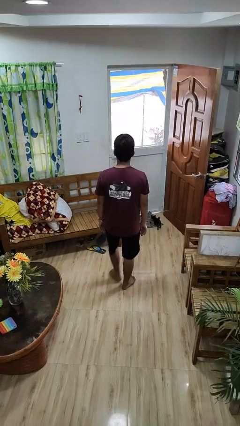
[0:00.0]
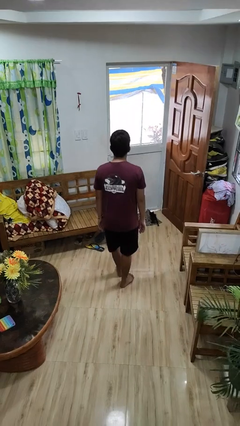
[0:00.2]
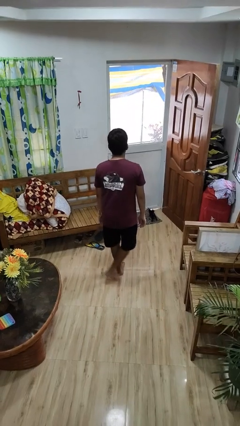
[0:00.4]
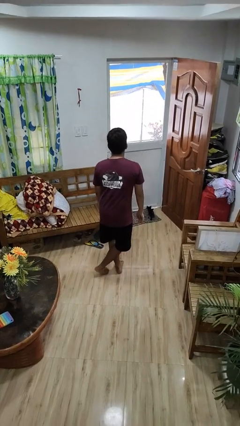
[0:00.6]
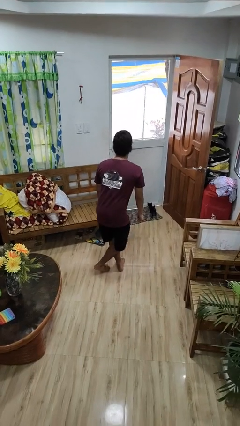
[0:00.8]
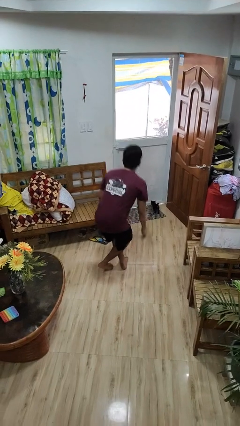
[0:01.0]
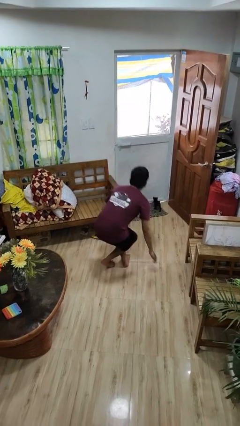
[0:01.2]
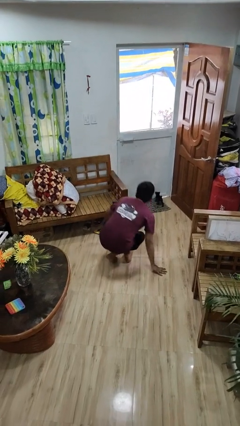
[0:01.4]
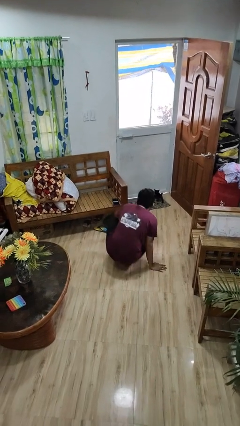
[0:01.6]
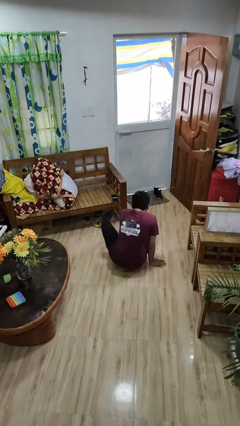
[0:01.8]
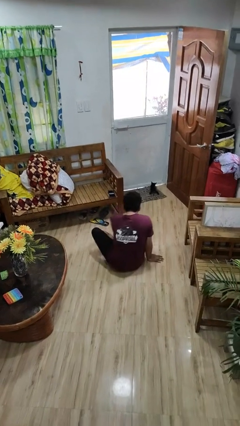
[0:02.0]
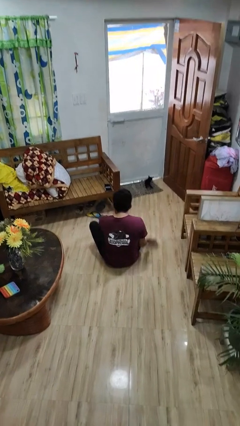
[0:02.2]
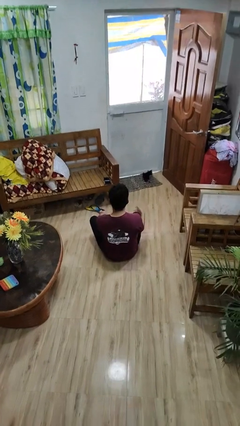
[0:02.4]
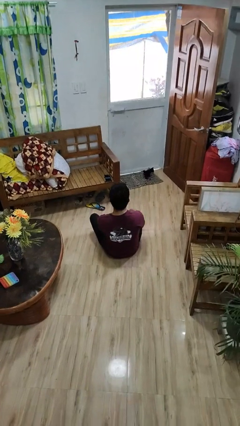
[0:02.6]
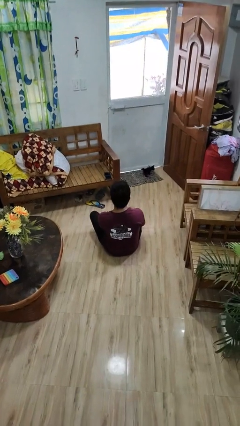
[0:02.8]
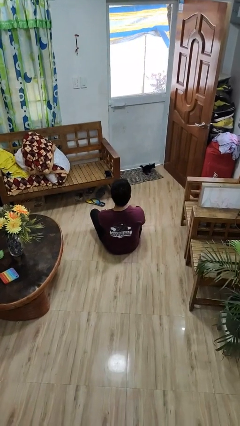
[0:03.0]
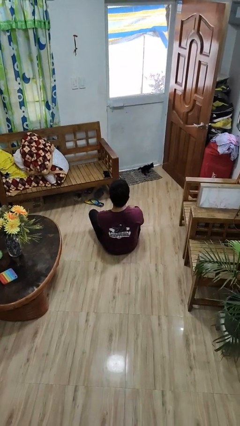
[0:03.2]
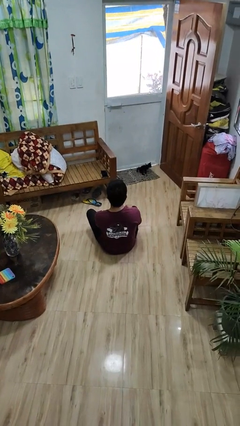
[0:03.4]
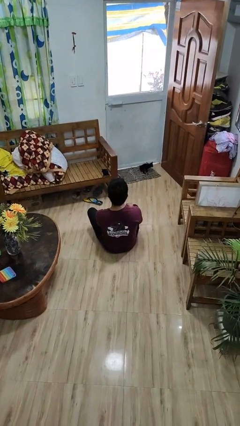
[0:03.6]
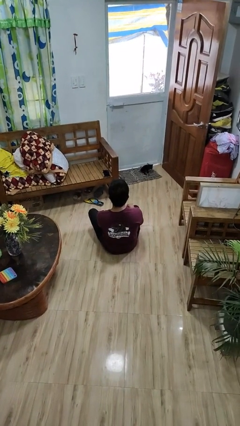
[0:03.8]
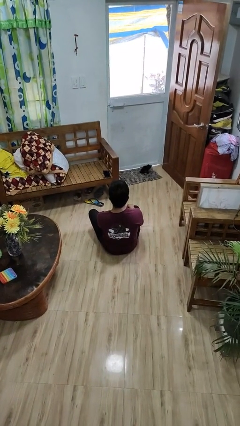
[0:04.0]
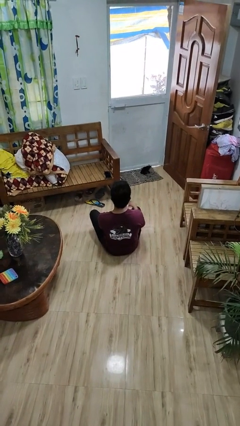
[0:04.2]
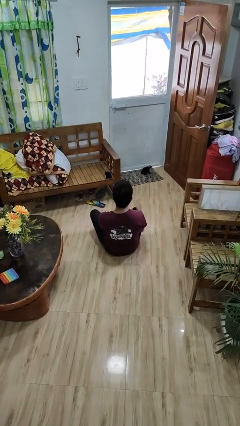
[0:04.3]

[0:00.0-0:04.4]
person sits crisscross

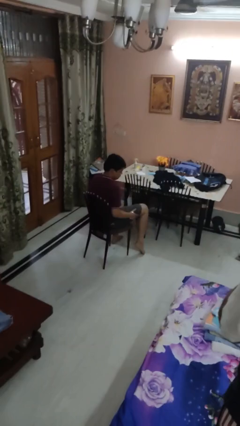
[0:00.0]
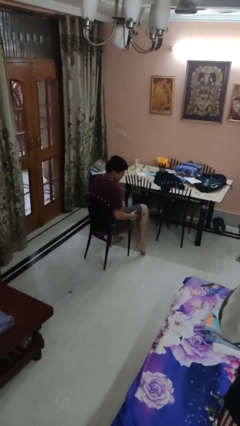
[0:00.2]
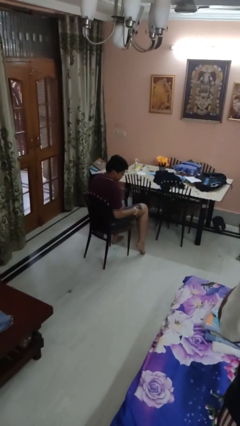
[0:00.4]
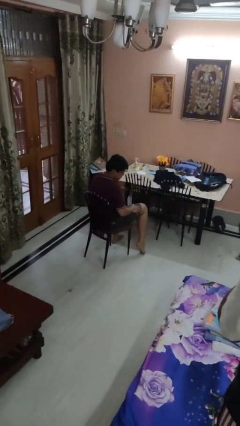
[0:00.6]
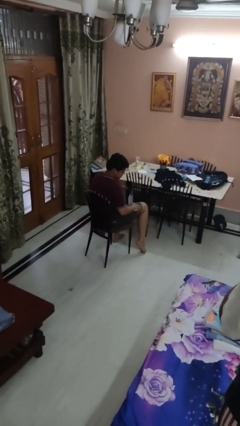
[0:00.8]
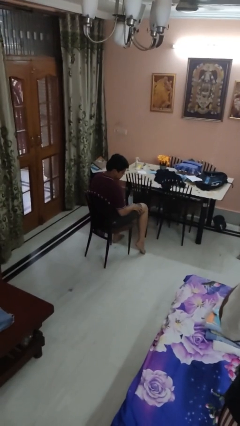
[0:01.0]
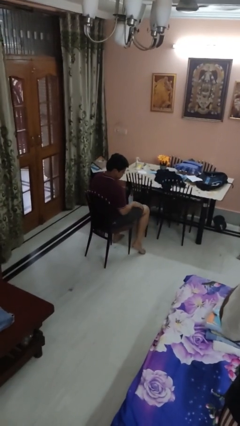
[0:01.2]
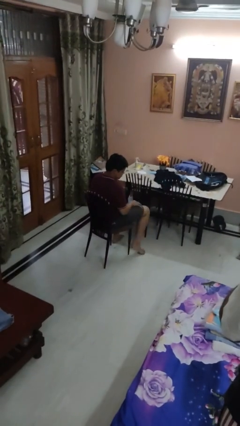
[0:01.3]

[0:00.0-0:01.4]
person swats bug

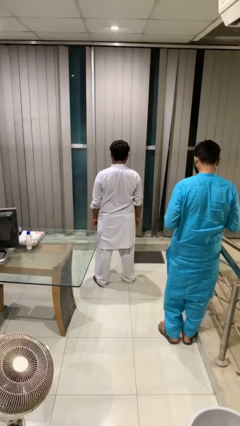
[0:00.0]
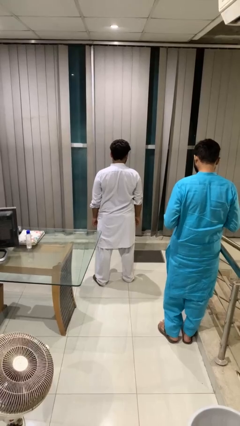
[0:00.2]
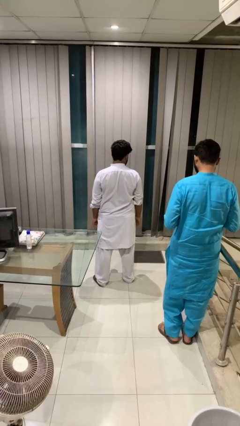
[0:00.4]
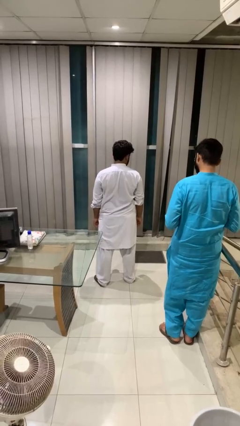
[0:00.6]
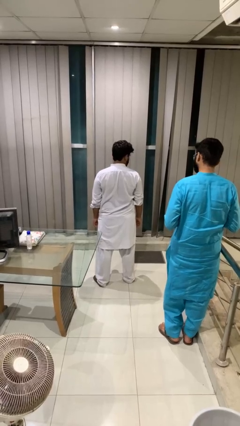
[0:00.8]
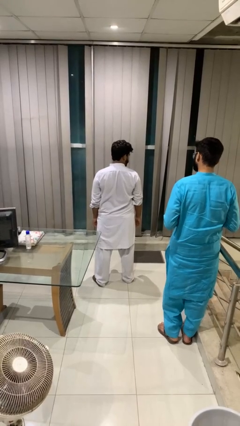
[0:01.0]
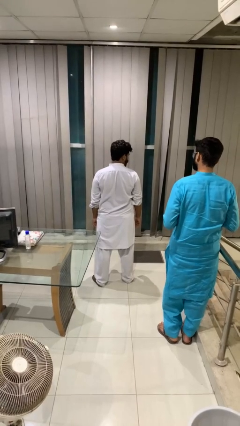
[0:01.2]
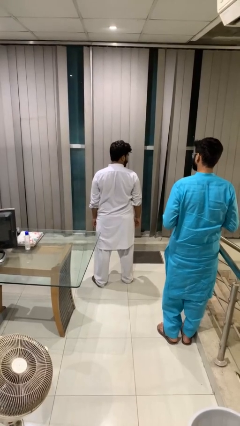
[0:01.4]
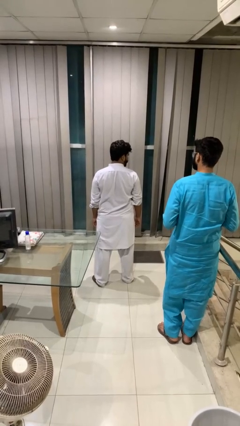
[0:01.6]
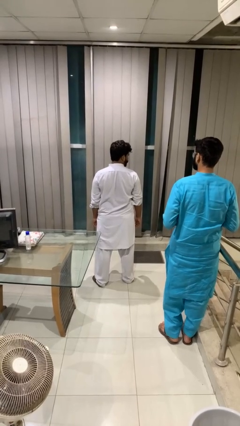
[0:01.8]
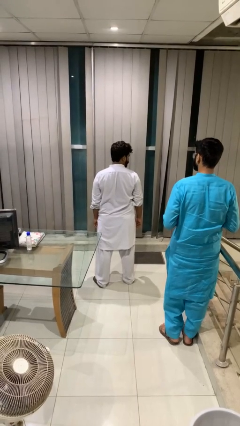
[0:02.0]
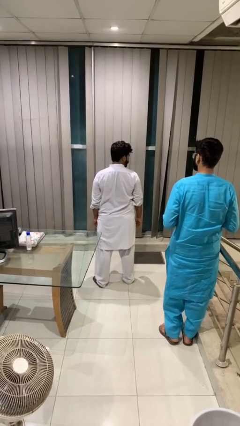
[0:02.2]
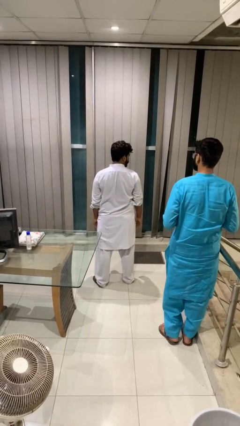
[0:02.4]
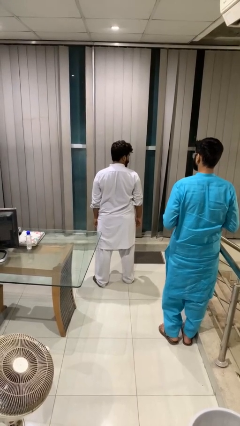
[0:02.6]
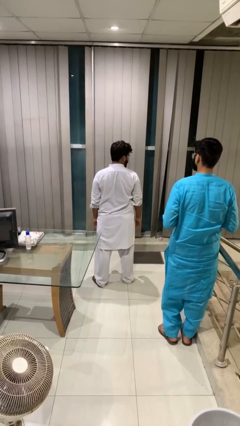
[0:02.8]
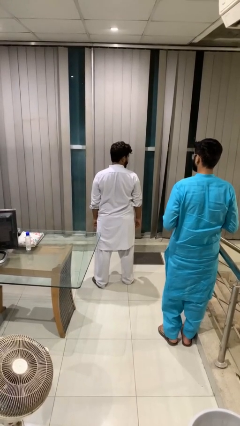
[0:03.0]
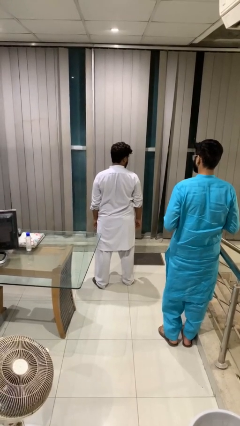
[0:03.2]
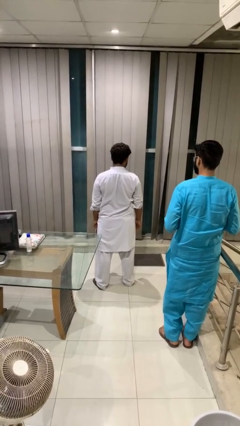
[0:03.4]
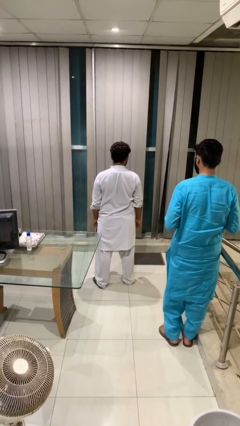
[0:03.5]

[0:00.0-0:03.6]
person looks over shoulder

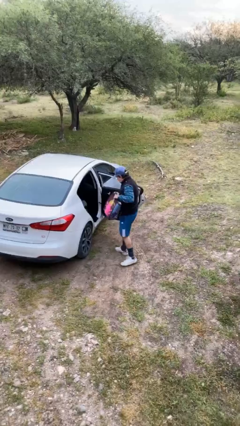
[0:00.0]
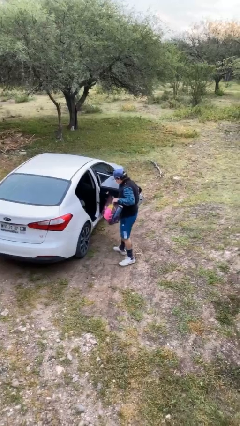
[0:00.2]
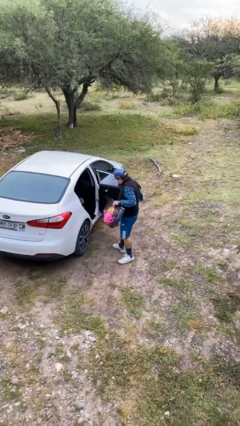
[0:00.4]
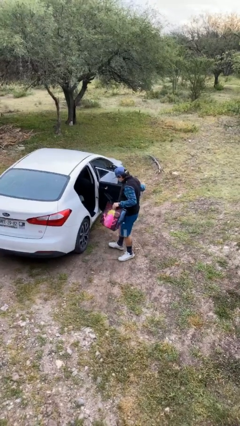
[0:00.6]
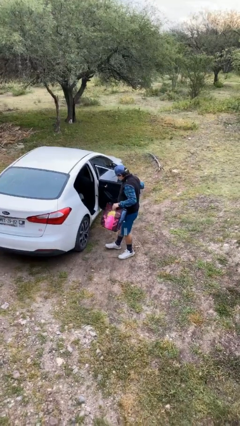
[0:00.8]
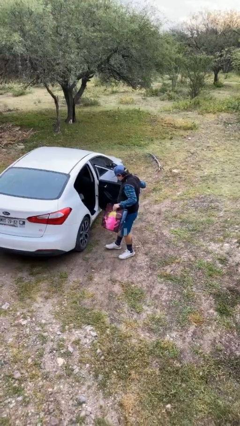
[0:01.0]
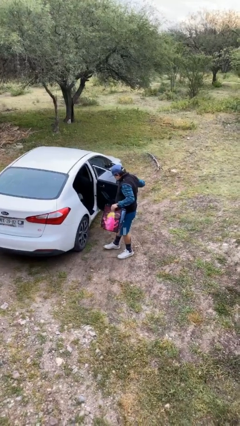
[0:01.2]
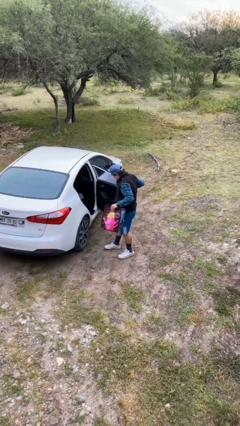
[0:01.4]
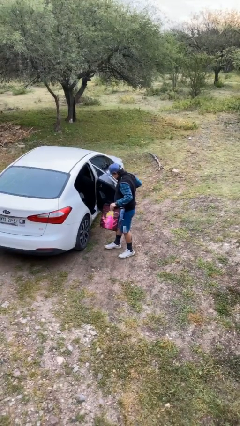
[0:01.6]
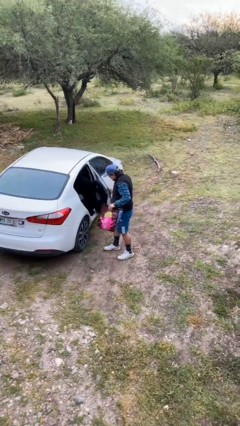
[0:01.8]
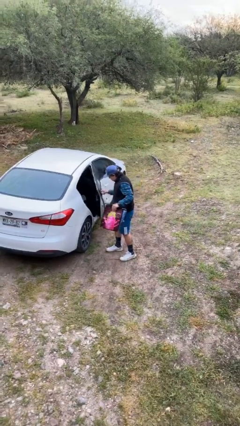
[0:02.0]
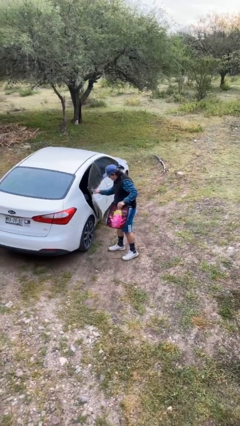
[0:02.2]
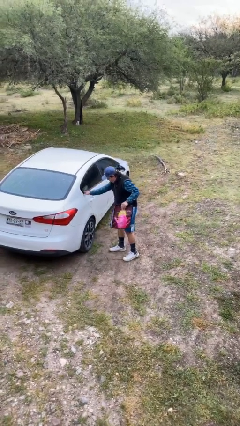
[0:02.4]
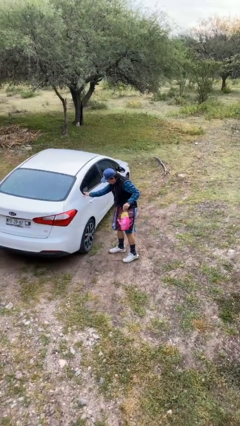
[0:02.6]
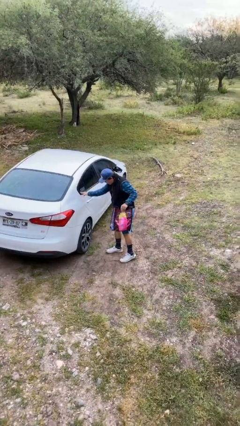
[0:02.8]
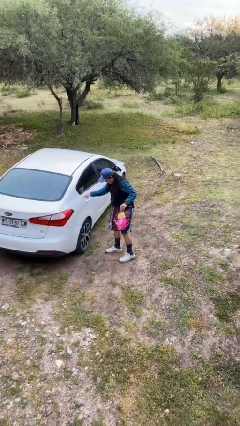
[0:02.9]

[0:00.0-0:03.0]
person closes car door

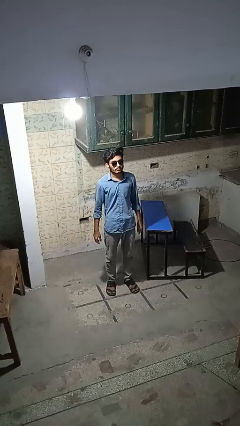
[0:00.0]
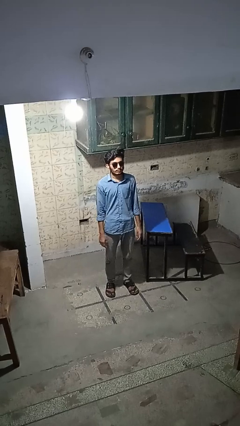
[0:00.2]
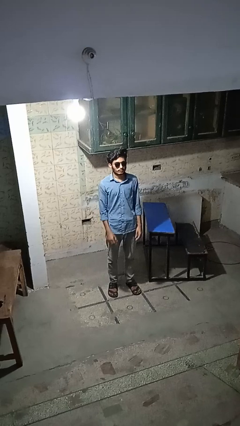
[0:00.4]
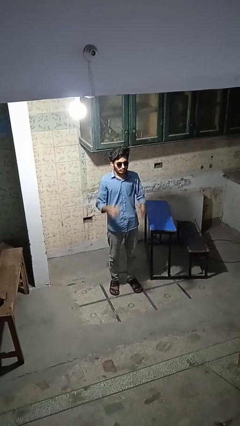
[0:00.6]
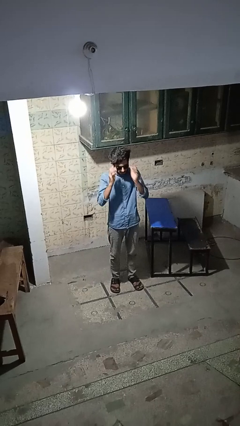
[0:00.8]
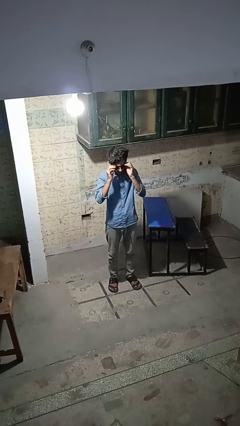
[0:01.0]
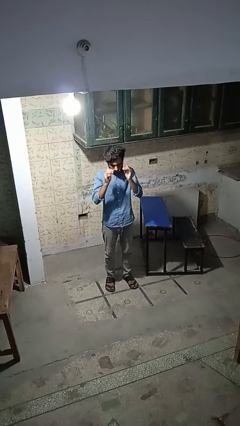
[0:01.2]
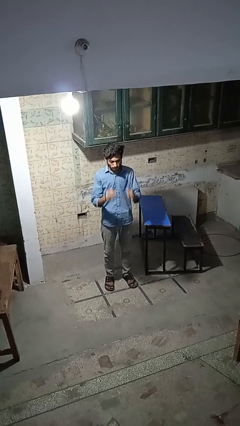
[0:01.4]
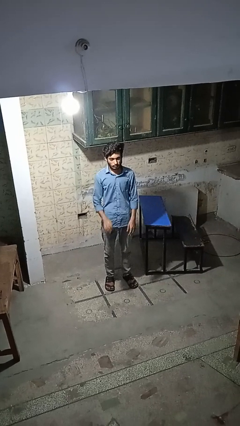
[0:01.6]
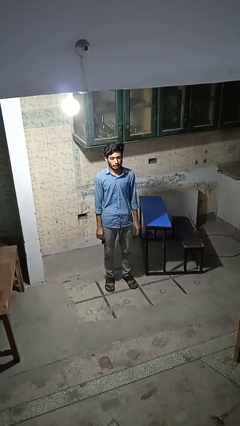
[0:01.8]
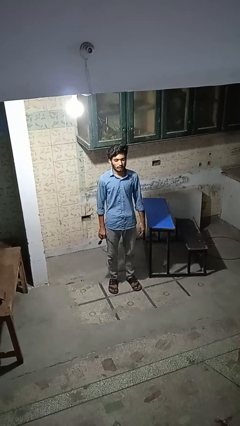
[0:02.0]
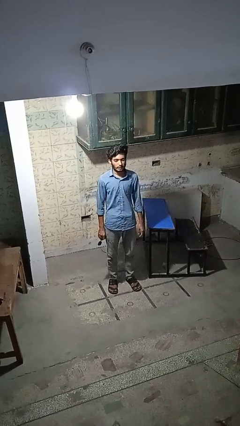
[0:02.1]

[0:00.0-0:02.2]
person takes off sunglasses

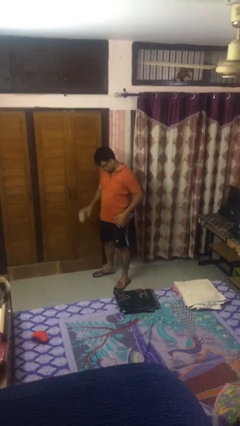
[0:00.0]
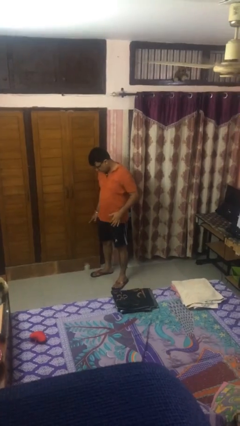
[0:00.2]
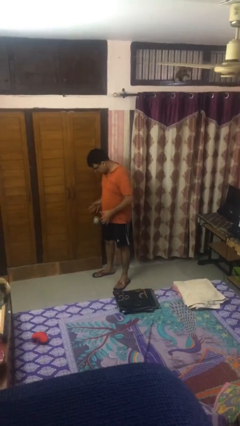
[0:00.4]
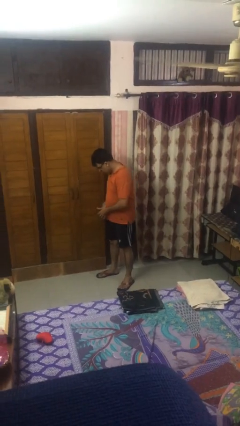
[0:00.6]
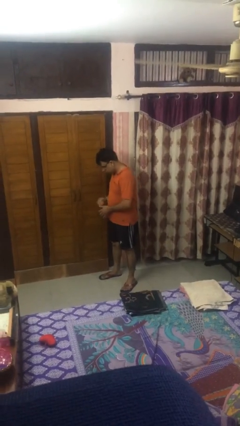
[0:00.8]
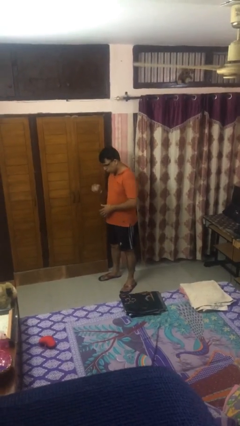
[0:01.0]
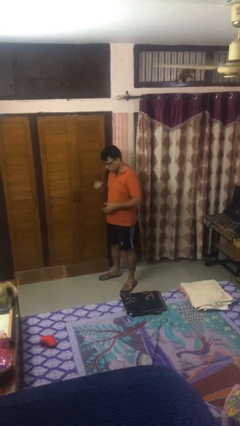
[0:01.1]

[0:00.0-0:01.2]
person bounces ball on floor

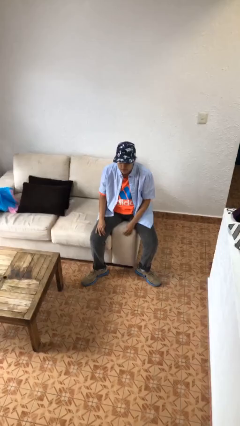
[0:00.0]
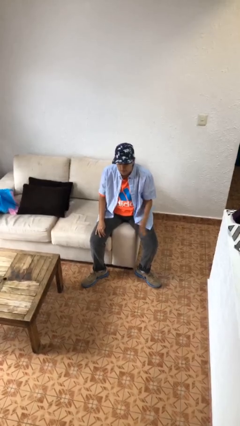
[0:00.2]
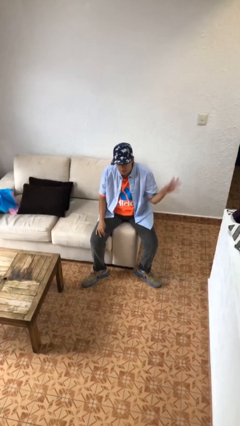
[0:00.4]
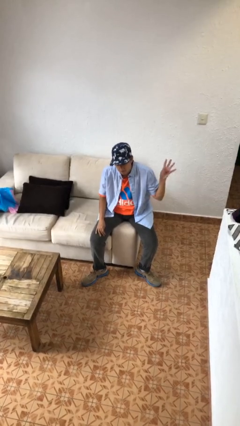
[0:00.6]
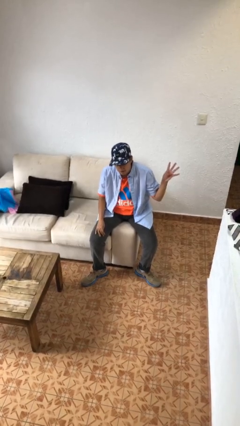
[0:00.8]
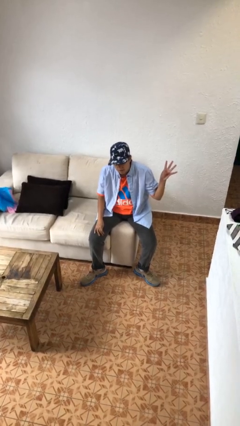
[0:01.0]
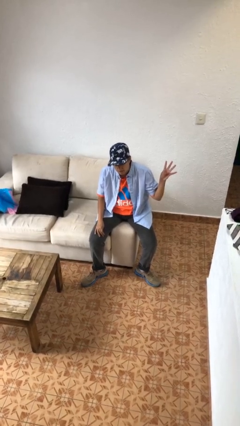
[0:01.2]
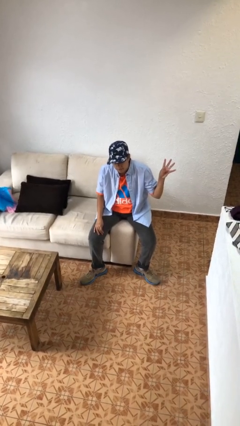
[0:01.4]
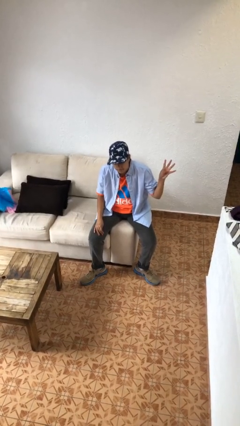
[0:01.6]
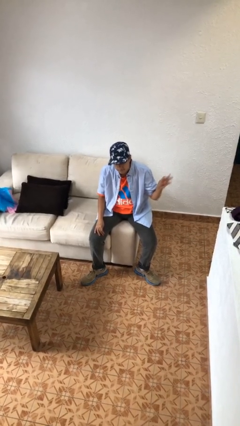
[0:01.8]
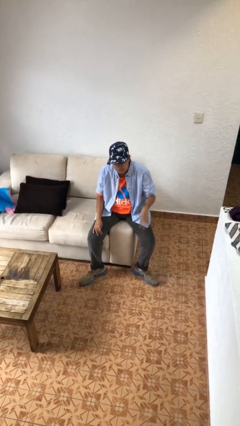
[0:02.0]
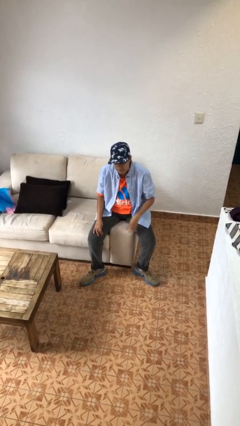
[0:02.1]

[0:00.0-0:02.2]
person gestures number four
